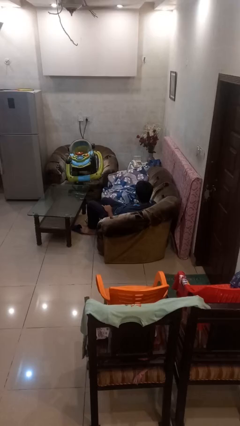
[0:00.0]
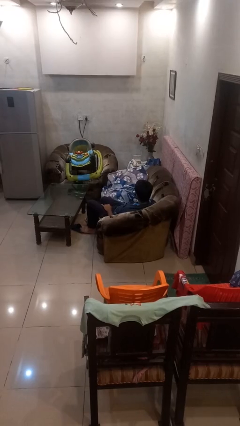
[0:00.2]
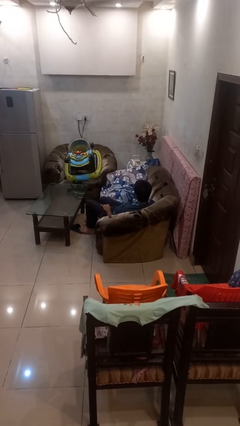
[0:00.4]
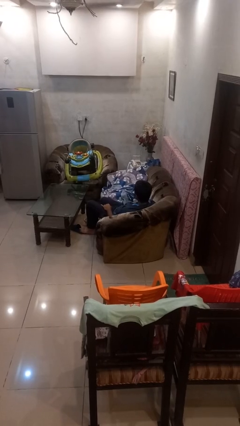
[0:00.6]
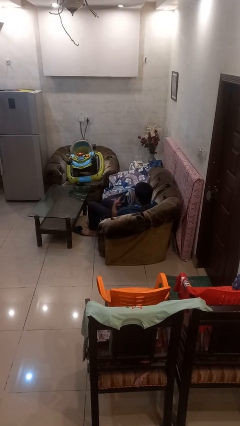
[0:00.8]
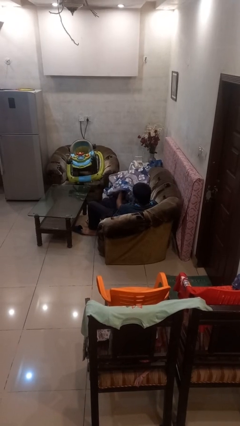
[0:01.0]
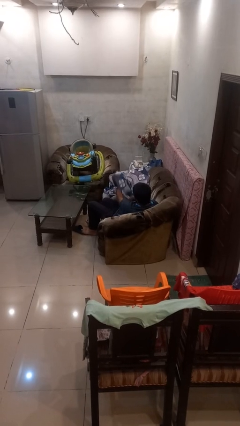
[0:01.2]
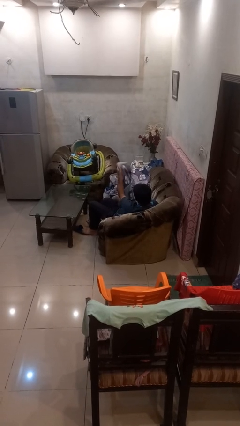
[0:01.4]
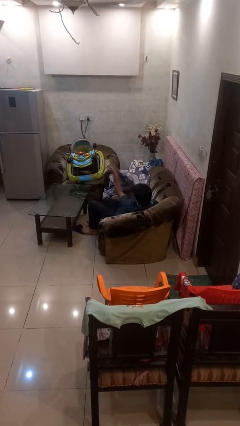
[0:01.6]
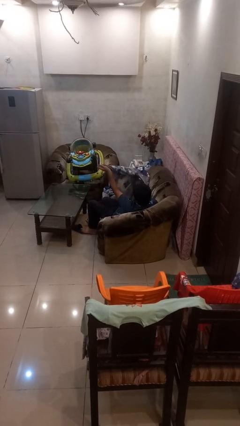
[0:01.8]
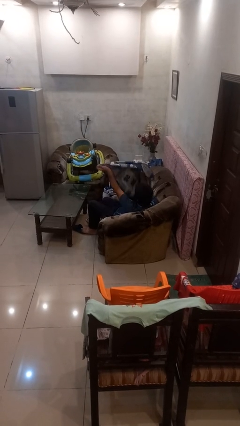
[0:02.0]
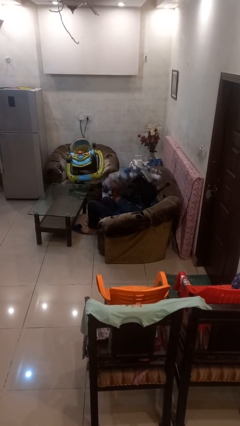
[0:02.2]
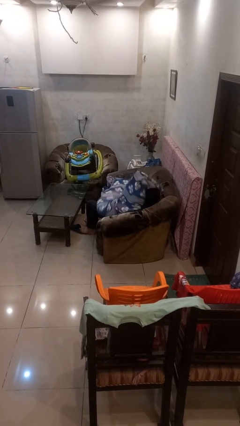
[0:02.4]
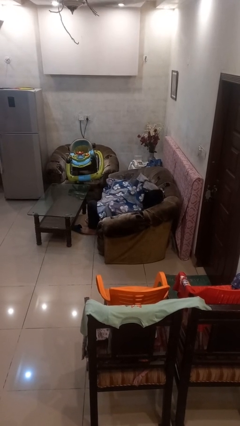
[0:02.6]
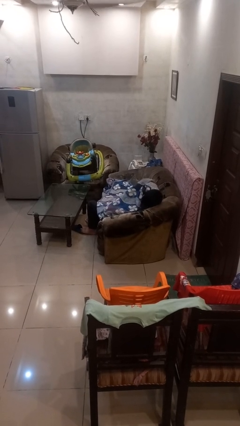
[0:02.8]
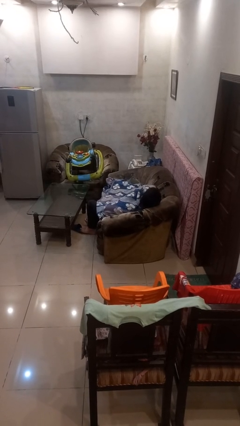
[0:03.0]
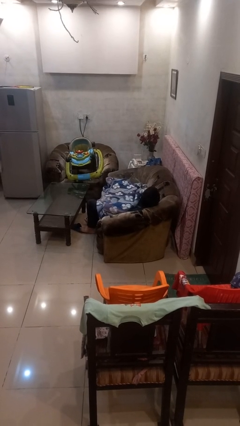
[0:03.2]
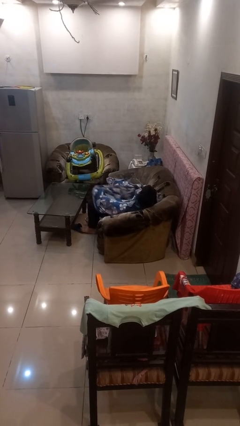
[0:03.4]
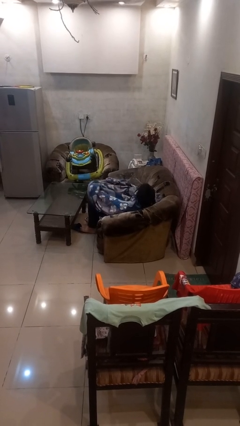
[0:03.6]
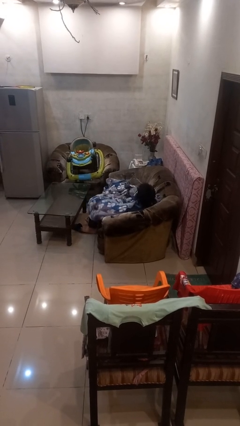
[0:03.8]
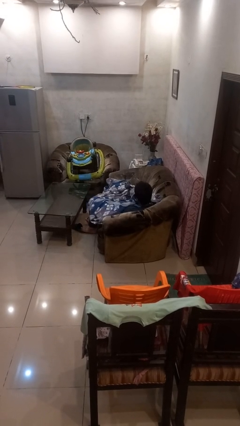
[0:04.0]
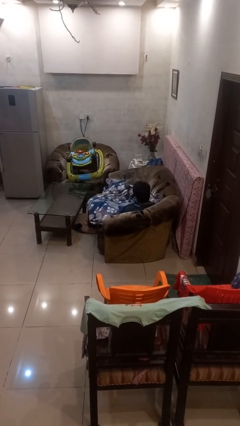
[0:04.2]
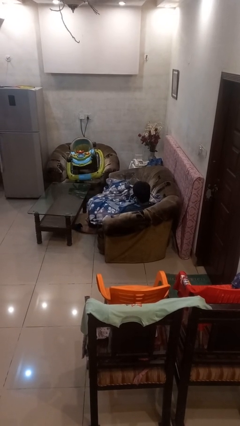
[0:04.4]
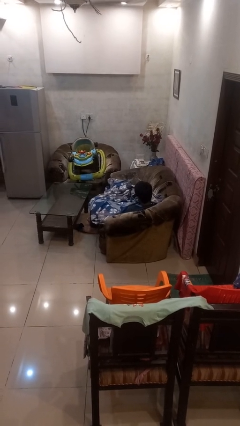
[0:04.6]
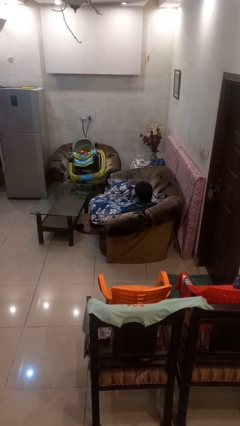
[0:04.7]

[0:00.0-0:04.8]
person covers with blanket

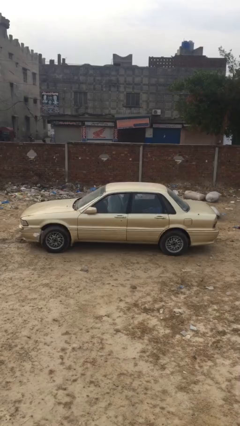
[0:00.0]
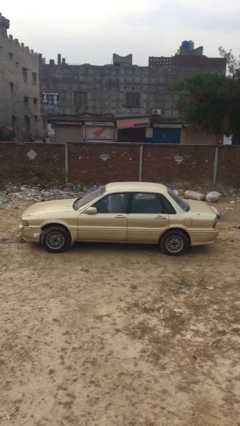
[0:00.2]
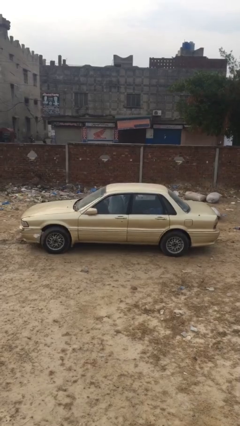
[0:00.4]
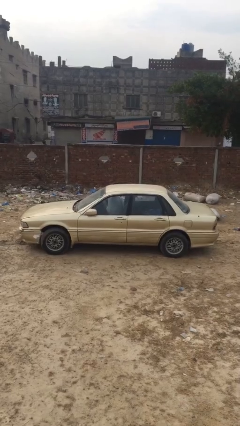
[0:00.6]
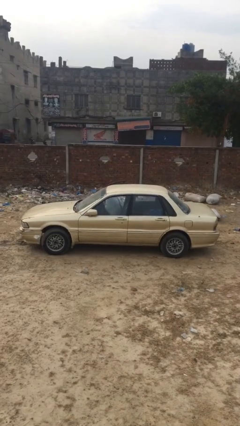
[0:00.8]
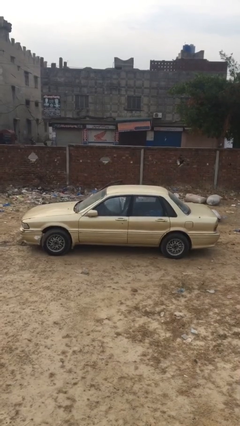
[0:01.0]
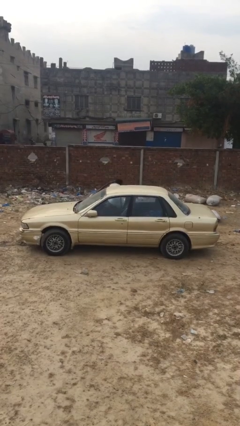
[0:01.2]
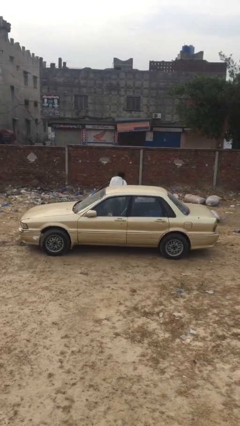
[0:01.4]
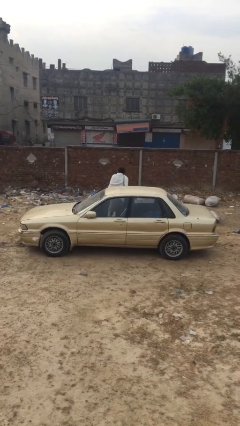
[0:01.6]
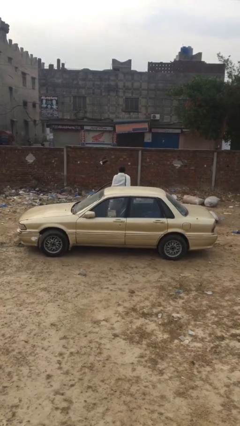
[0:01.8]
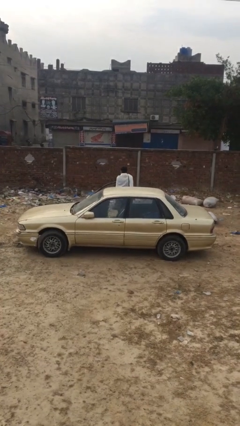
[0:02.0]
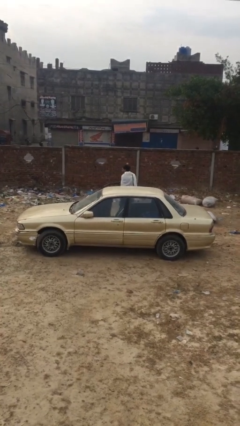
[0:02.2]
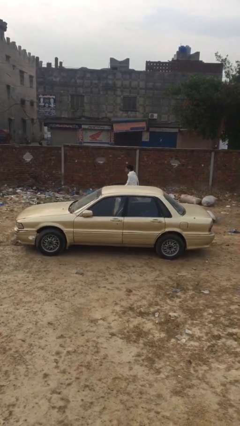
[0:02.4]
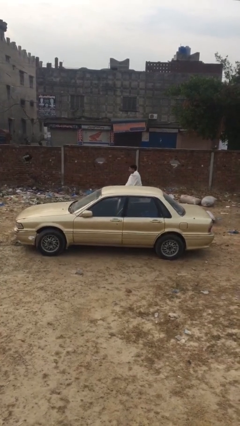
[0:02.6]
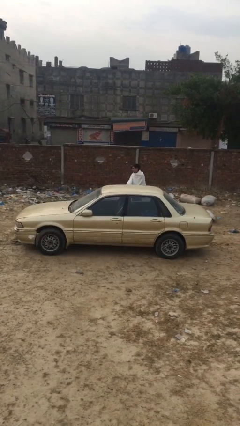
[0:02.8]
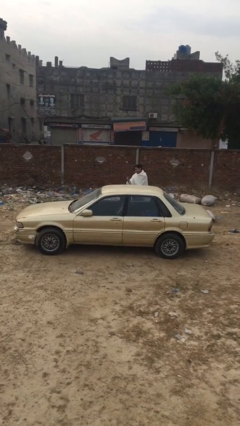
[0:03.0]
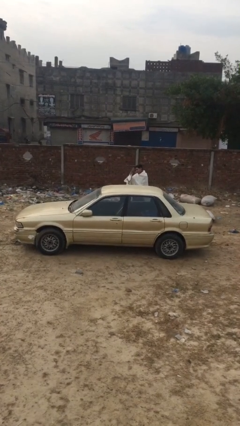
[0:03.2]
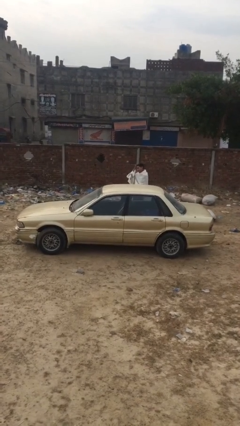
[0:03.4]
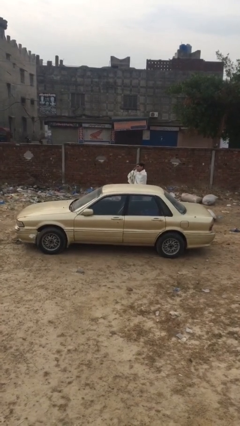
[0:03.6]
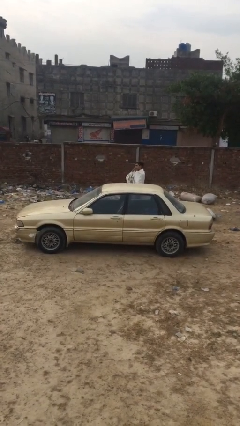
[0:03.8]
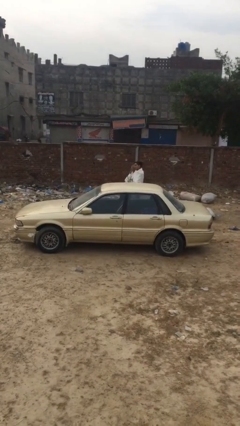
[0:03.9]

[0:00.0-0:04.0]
car drops off person

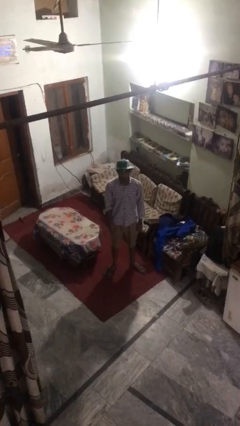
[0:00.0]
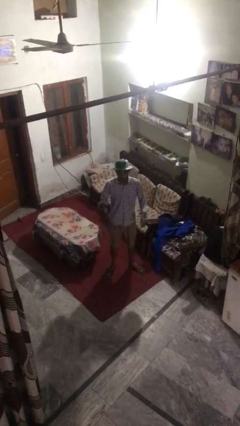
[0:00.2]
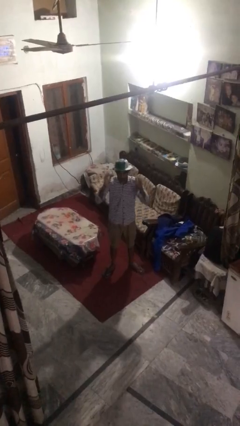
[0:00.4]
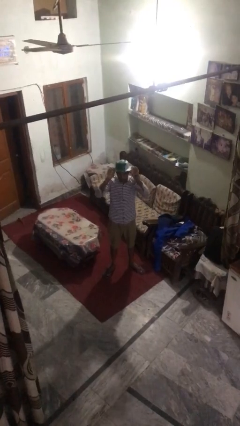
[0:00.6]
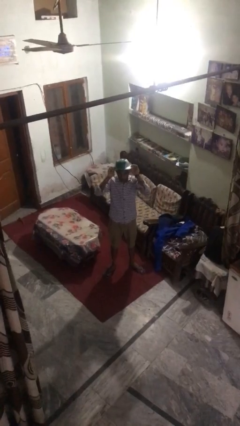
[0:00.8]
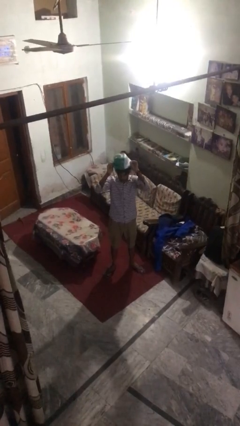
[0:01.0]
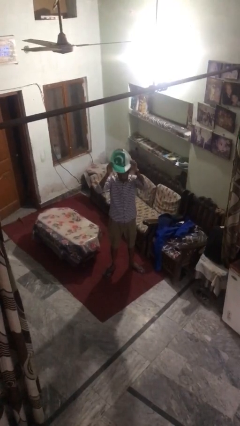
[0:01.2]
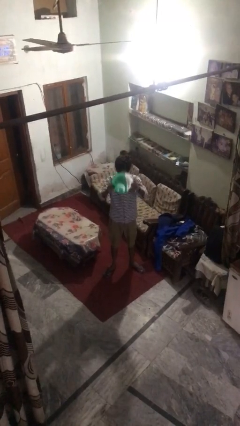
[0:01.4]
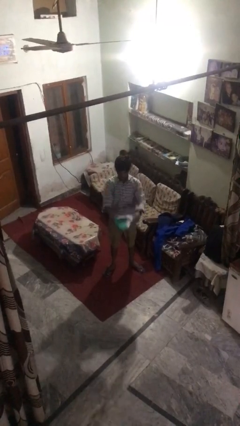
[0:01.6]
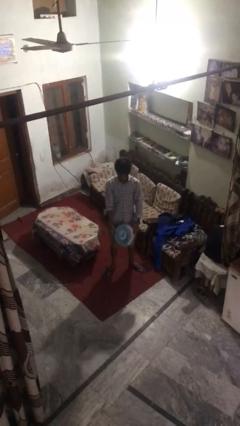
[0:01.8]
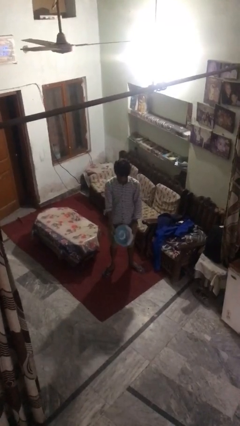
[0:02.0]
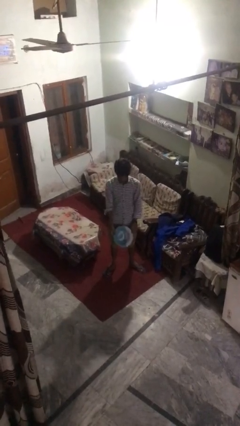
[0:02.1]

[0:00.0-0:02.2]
person takes off hat

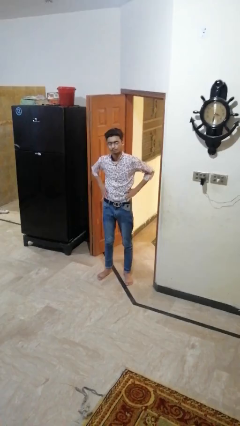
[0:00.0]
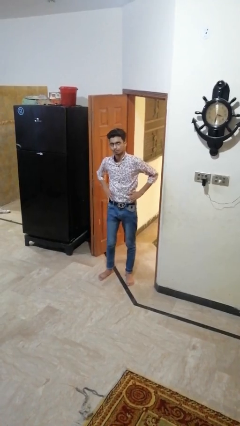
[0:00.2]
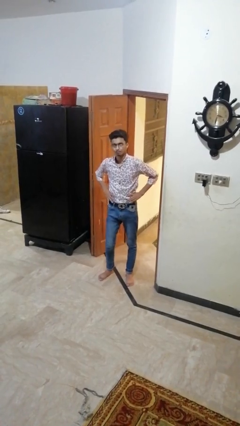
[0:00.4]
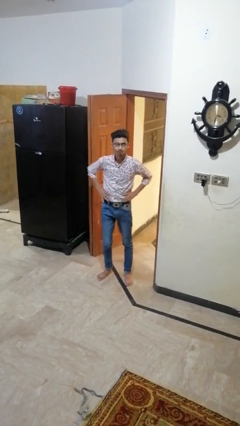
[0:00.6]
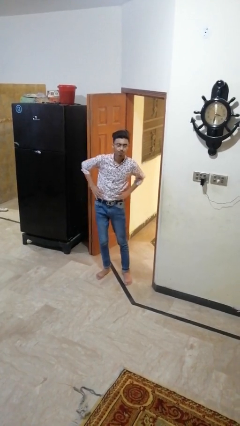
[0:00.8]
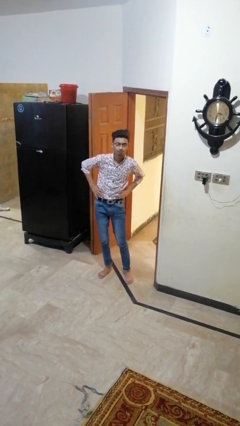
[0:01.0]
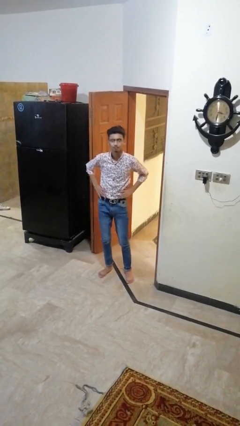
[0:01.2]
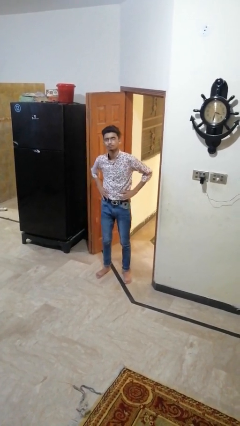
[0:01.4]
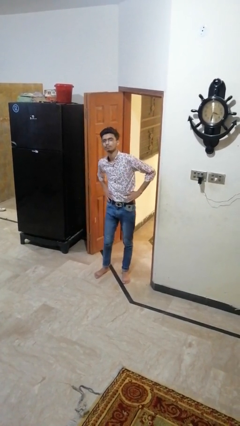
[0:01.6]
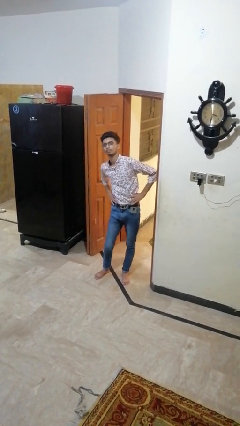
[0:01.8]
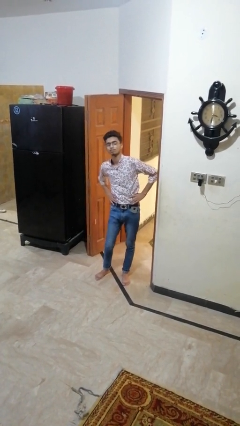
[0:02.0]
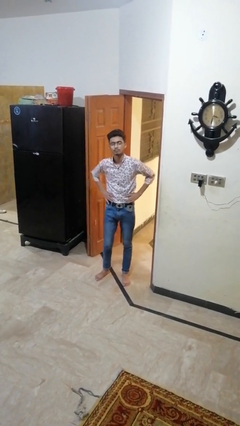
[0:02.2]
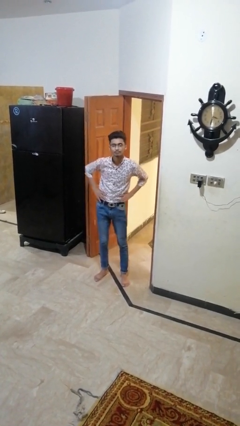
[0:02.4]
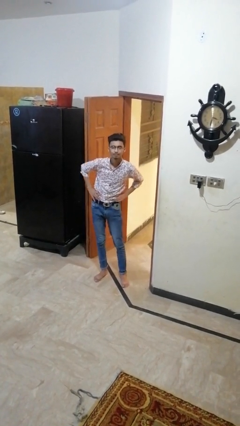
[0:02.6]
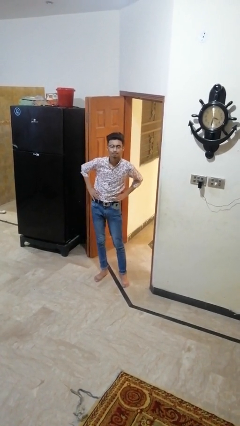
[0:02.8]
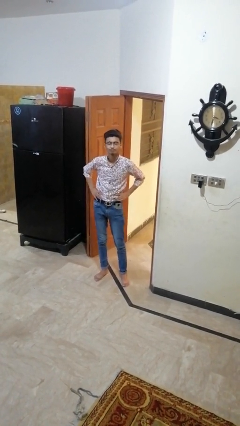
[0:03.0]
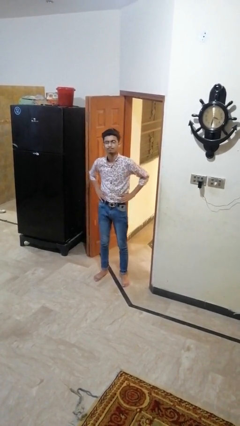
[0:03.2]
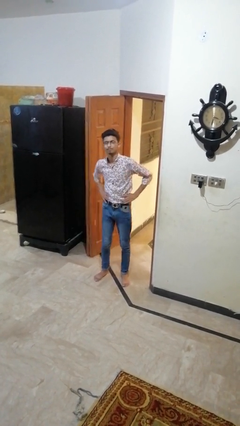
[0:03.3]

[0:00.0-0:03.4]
person wiggles hips

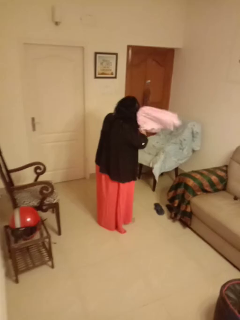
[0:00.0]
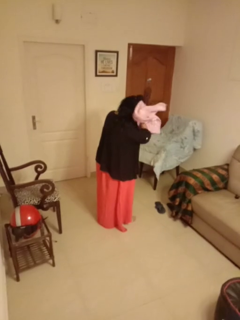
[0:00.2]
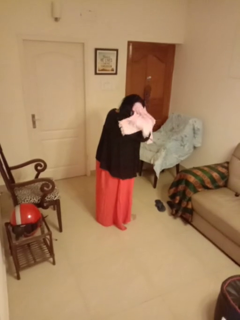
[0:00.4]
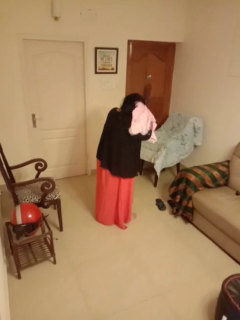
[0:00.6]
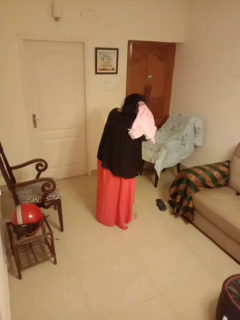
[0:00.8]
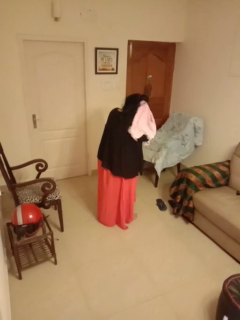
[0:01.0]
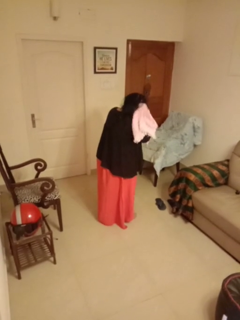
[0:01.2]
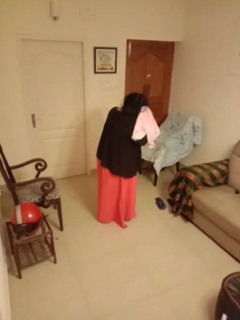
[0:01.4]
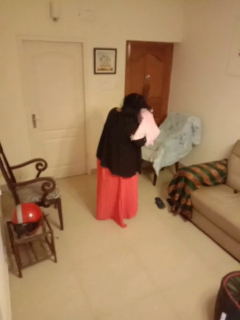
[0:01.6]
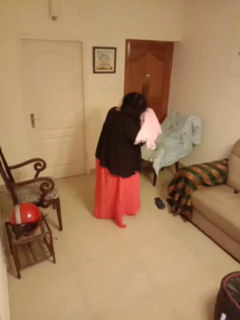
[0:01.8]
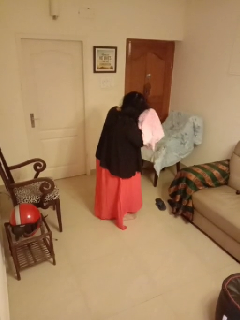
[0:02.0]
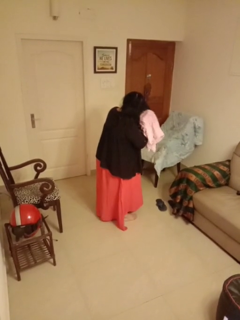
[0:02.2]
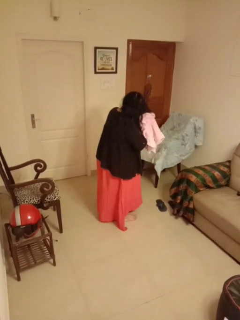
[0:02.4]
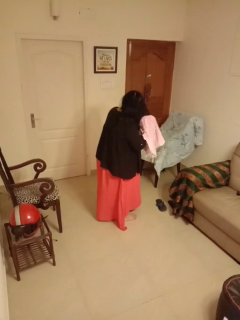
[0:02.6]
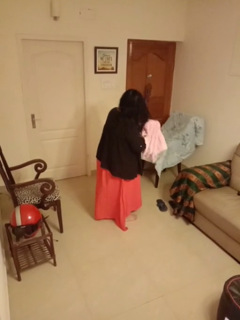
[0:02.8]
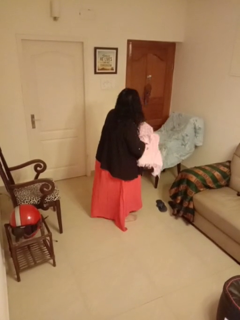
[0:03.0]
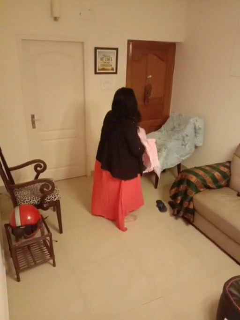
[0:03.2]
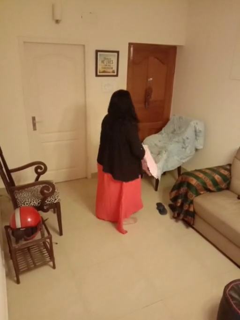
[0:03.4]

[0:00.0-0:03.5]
person dries hair with towel

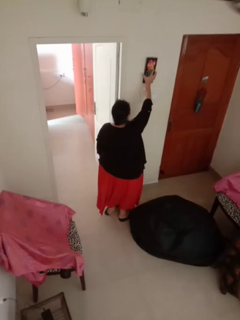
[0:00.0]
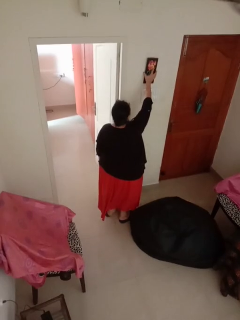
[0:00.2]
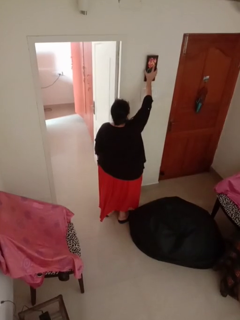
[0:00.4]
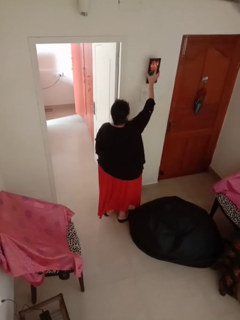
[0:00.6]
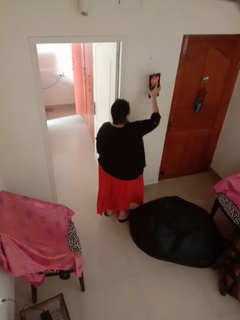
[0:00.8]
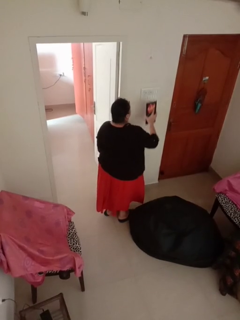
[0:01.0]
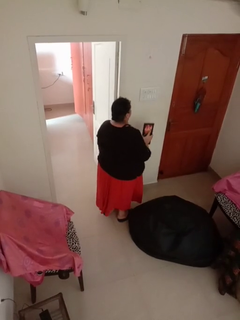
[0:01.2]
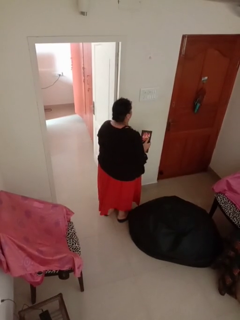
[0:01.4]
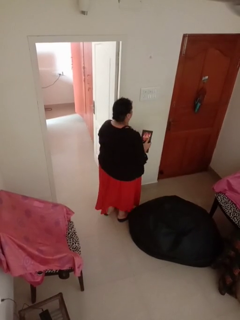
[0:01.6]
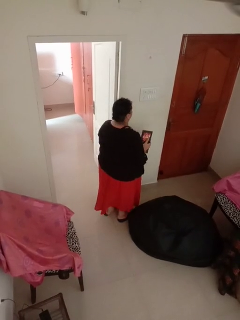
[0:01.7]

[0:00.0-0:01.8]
person takes down picture frame
